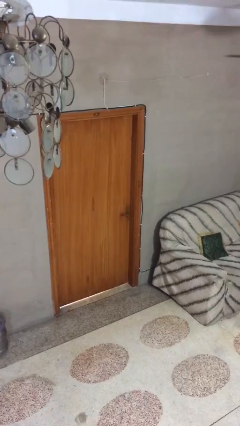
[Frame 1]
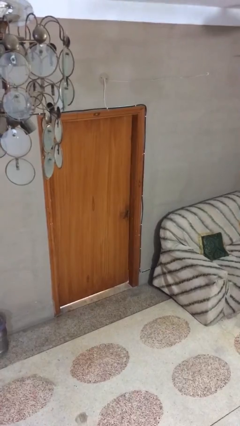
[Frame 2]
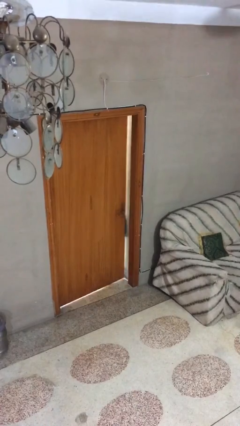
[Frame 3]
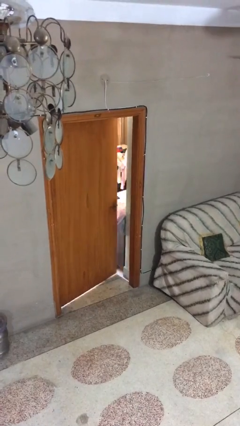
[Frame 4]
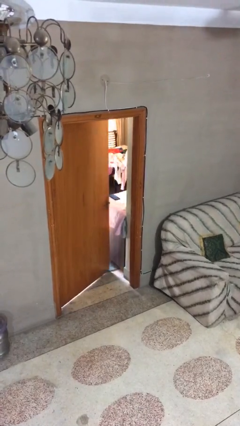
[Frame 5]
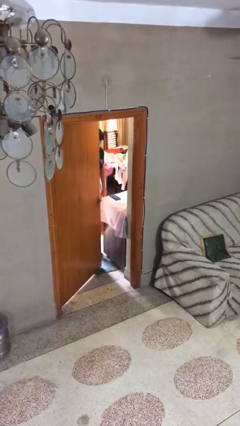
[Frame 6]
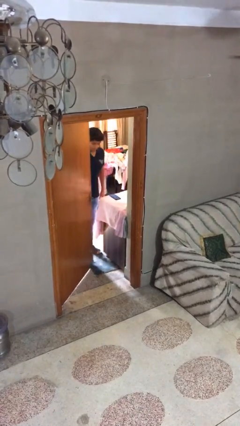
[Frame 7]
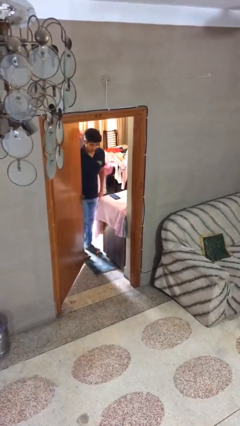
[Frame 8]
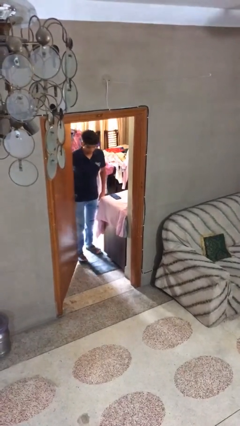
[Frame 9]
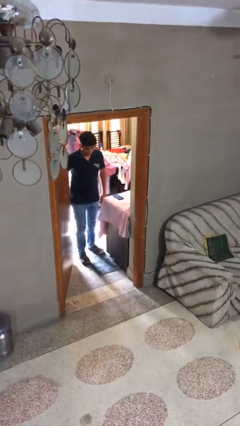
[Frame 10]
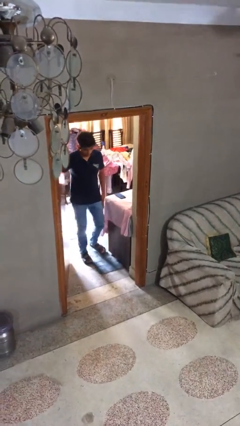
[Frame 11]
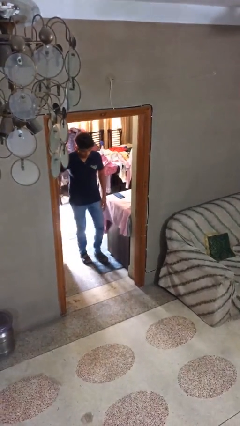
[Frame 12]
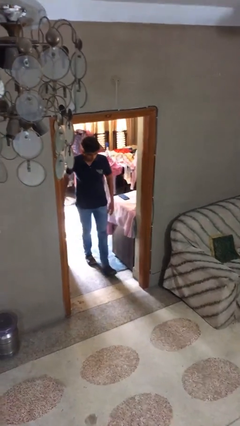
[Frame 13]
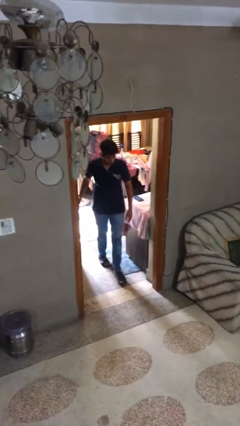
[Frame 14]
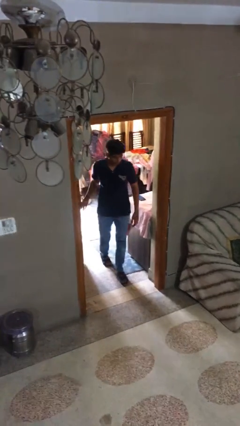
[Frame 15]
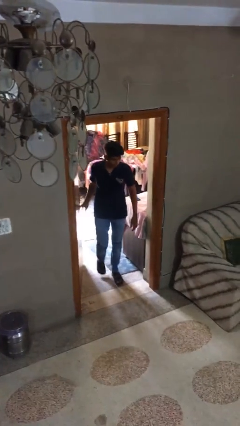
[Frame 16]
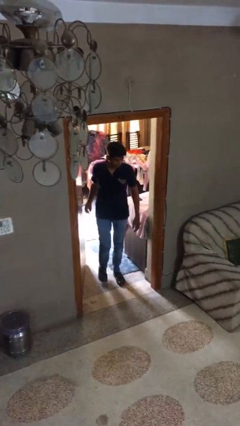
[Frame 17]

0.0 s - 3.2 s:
person opens facility door

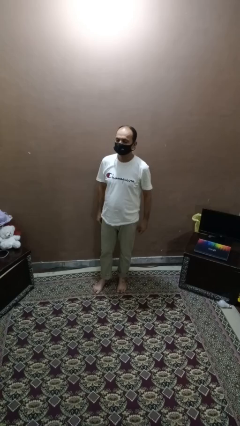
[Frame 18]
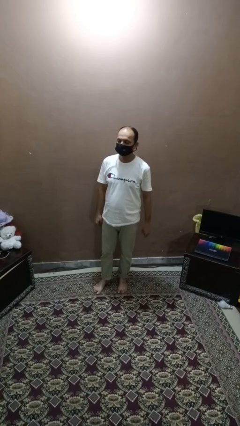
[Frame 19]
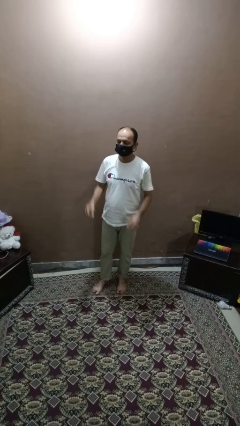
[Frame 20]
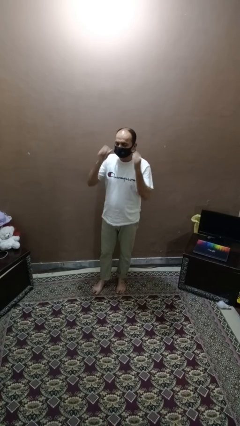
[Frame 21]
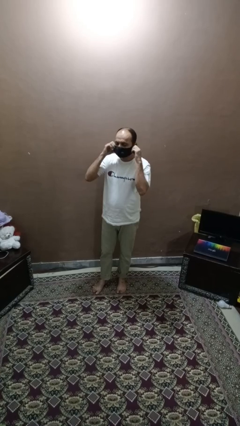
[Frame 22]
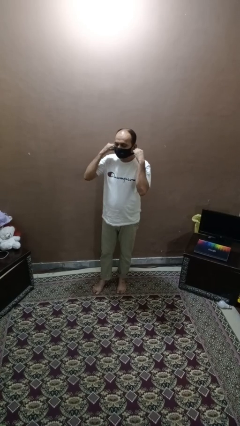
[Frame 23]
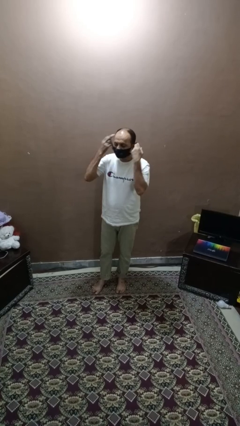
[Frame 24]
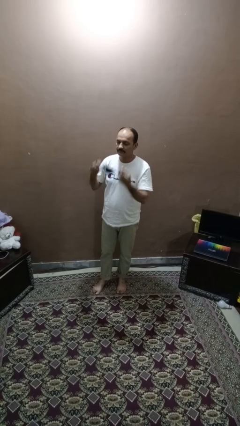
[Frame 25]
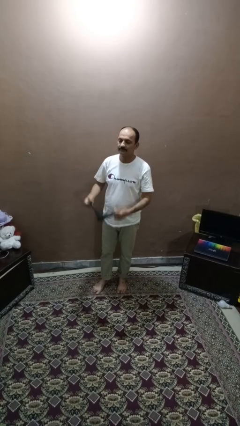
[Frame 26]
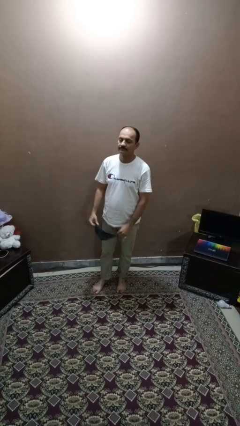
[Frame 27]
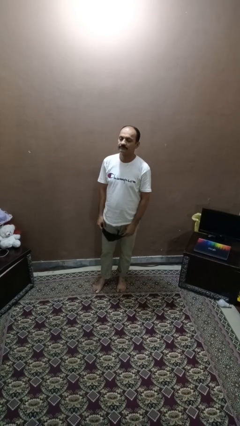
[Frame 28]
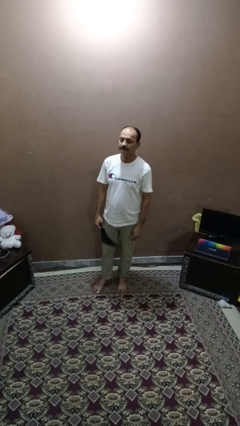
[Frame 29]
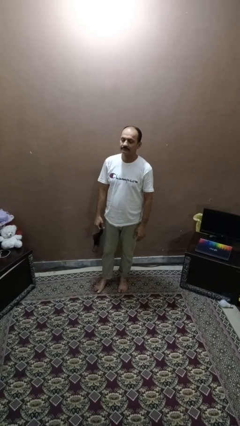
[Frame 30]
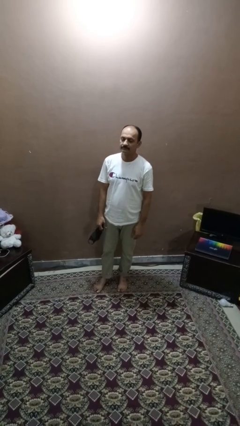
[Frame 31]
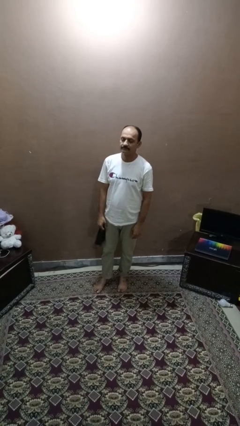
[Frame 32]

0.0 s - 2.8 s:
person takes off facemask

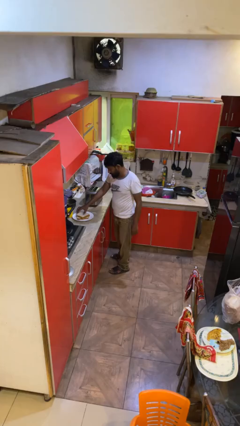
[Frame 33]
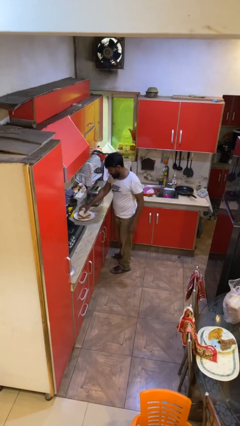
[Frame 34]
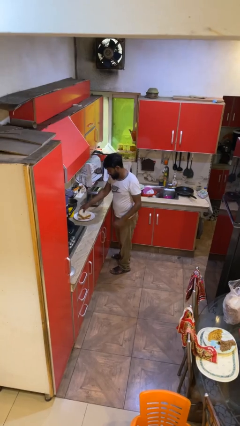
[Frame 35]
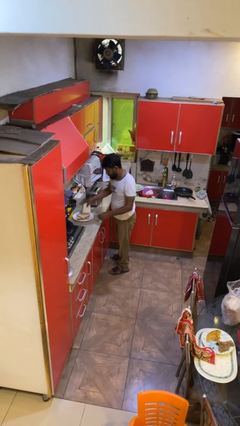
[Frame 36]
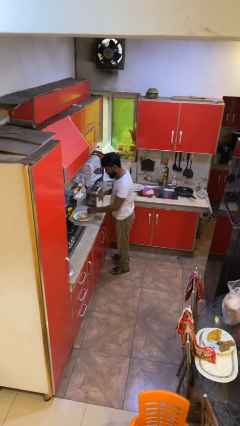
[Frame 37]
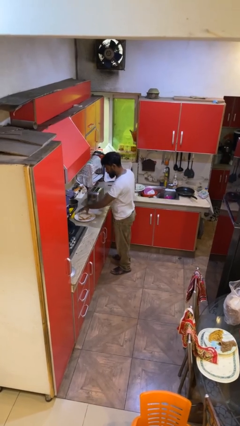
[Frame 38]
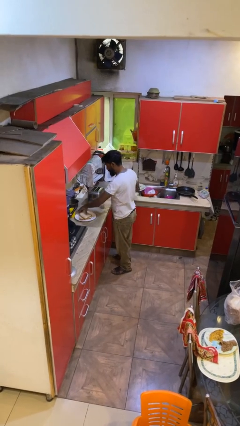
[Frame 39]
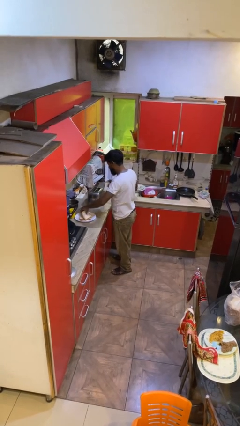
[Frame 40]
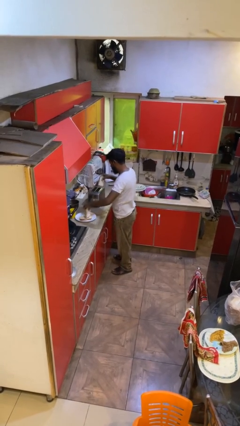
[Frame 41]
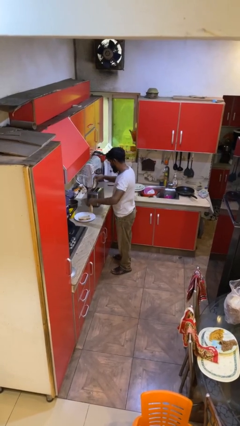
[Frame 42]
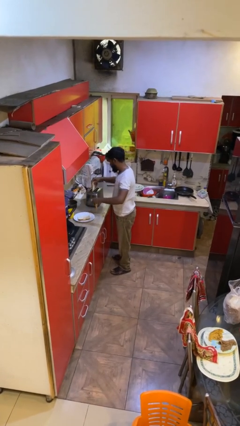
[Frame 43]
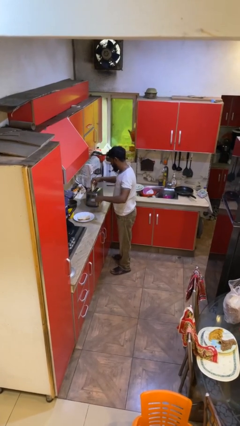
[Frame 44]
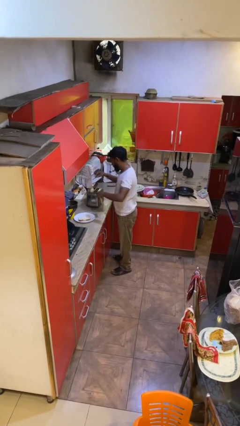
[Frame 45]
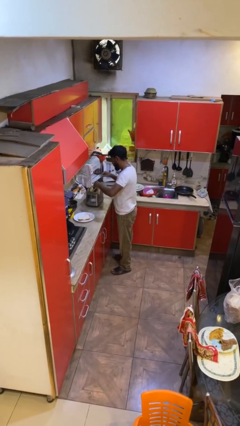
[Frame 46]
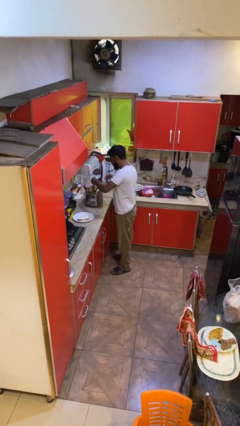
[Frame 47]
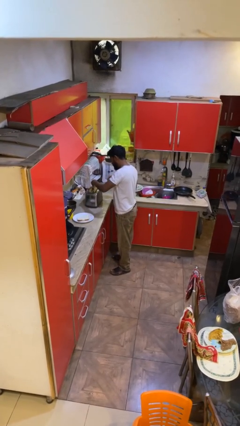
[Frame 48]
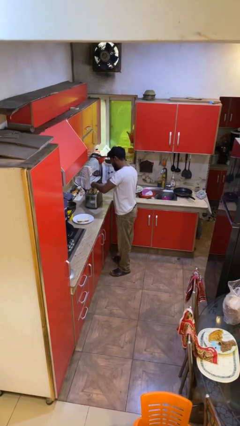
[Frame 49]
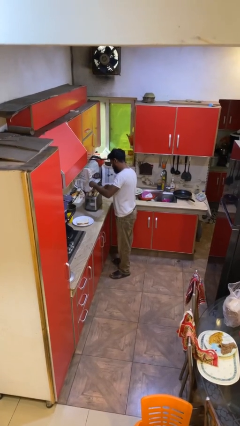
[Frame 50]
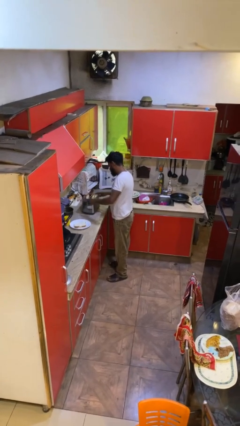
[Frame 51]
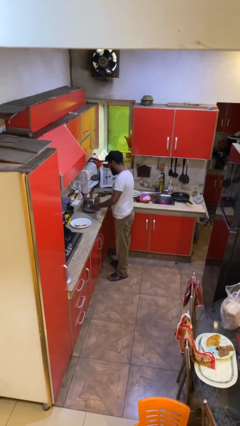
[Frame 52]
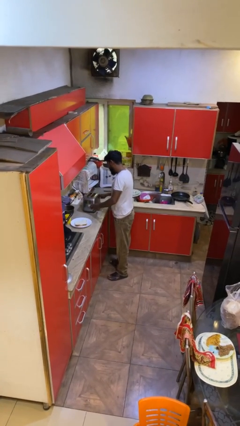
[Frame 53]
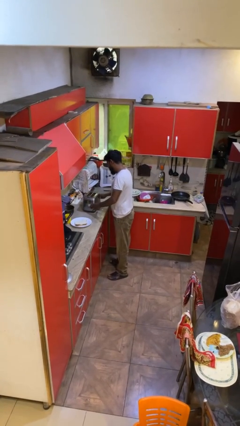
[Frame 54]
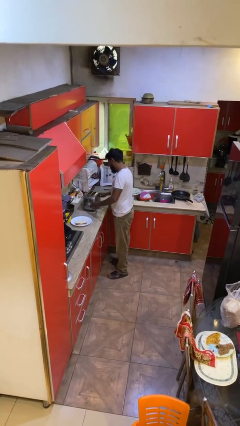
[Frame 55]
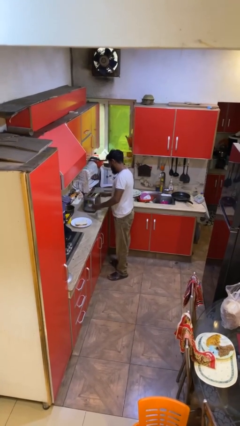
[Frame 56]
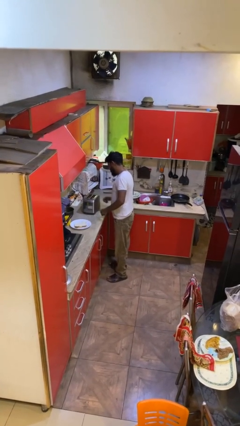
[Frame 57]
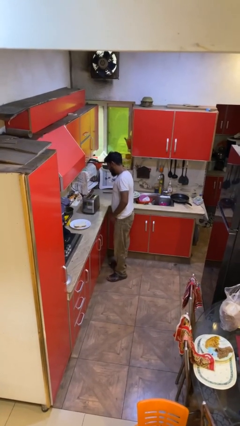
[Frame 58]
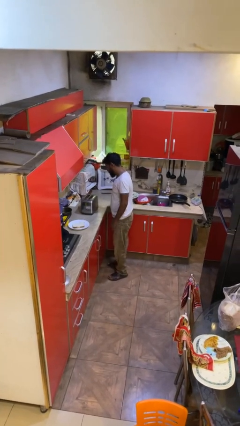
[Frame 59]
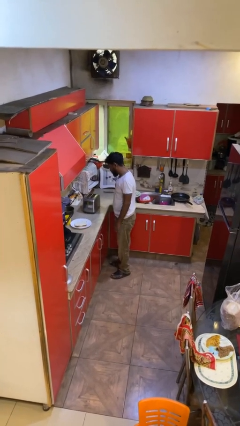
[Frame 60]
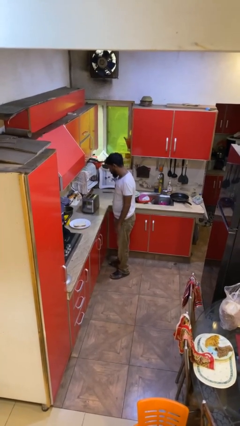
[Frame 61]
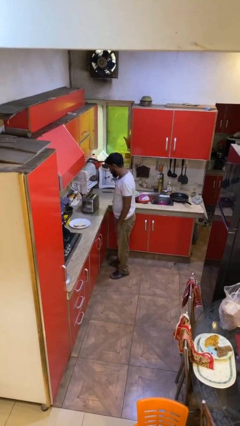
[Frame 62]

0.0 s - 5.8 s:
person puts object into toaster

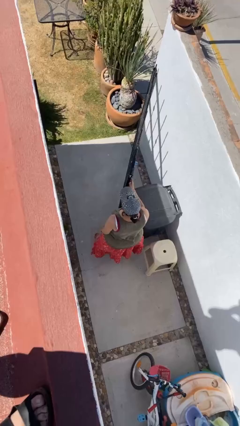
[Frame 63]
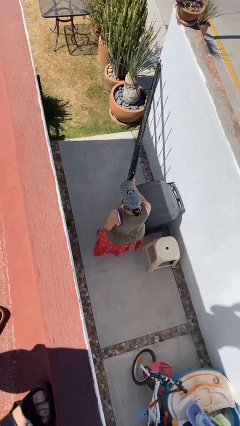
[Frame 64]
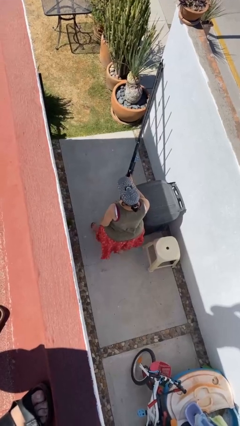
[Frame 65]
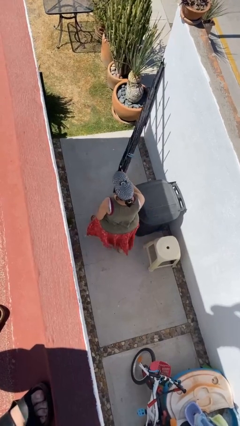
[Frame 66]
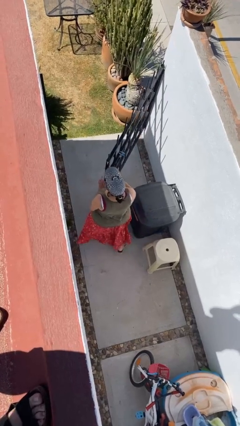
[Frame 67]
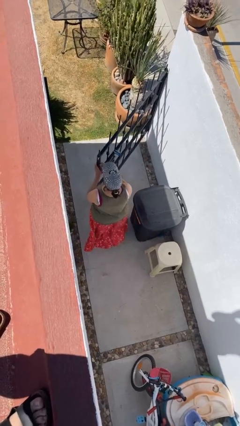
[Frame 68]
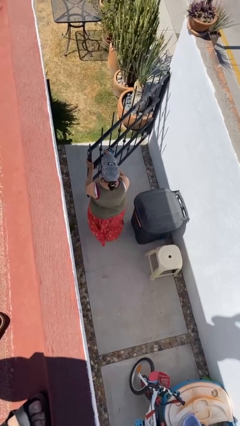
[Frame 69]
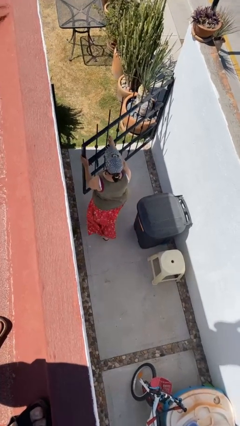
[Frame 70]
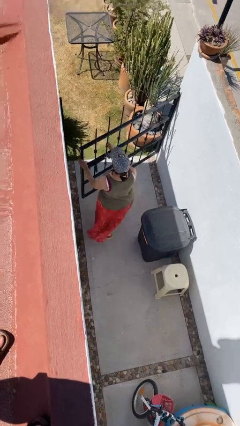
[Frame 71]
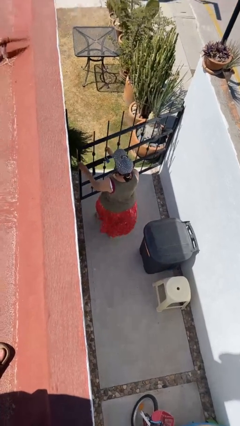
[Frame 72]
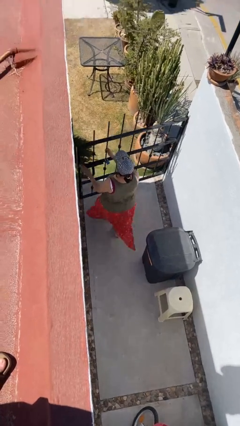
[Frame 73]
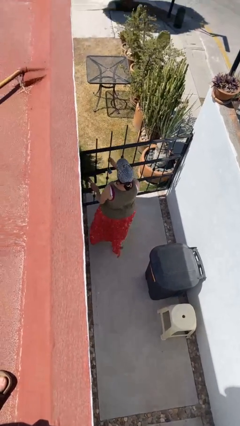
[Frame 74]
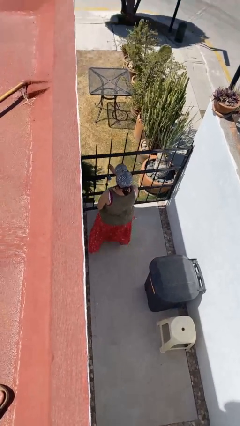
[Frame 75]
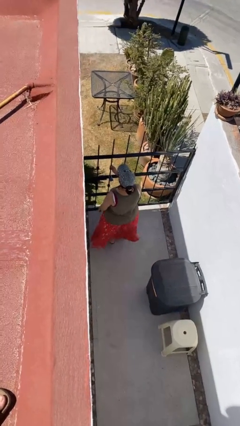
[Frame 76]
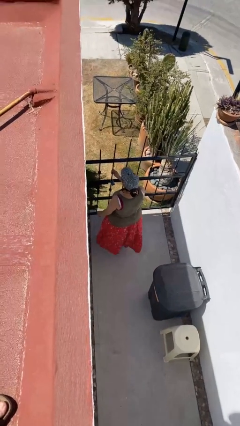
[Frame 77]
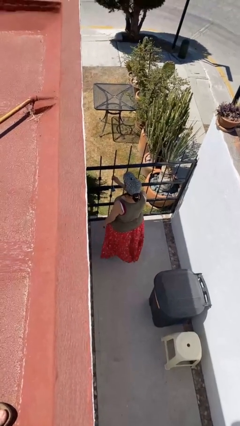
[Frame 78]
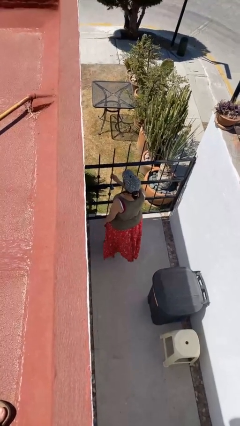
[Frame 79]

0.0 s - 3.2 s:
person closes facility door

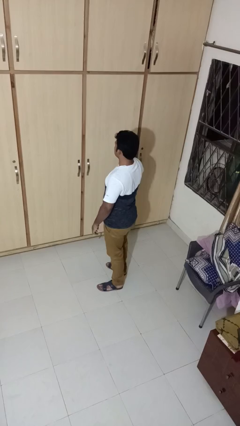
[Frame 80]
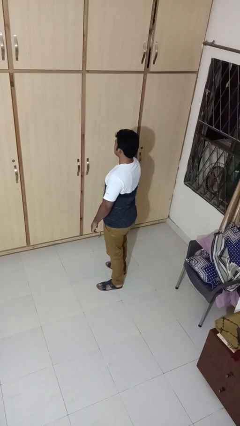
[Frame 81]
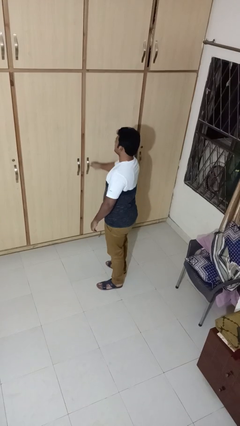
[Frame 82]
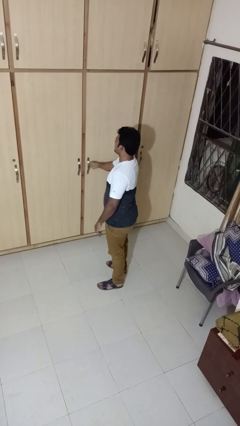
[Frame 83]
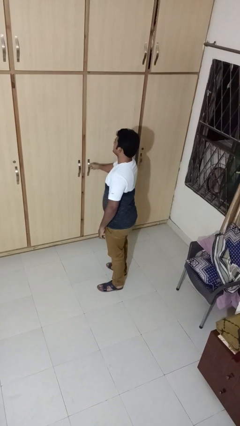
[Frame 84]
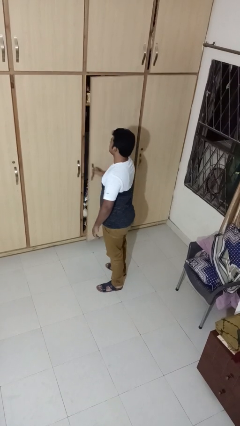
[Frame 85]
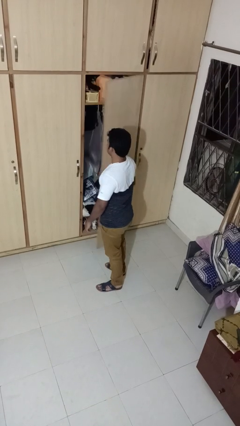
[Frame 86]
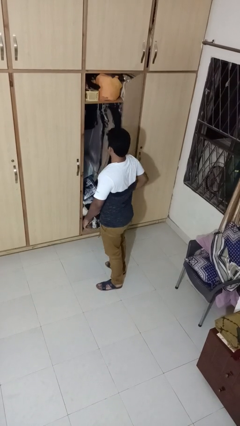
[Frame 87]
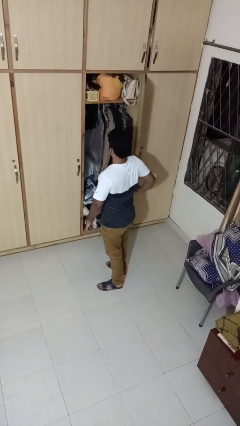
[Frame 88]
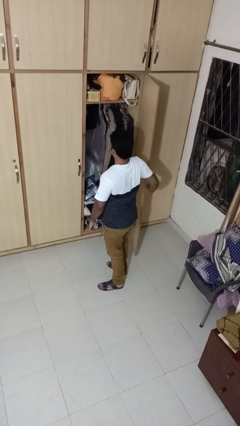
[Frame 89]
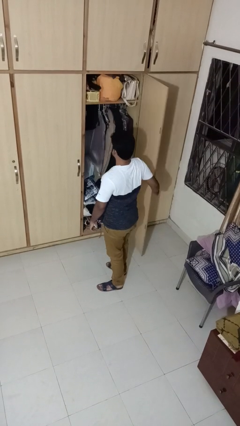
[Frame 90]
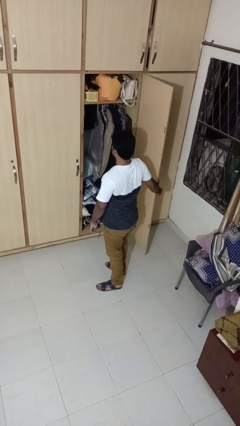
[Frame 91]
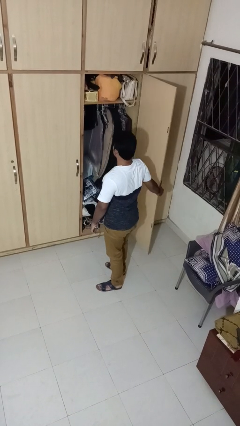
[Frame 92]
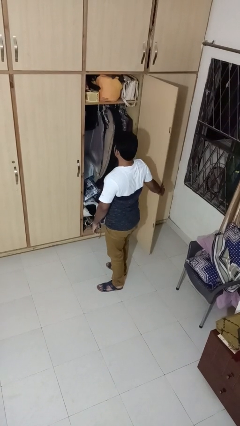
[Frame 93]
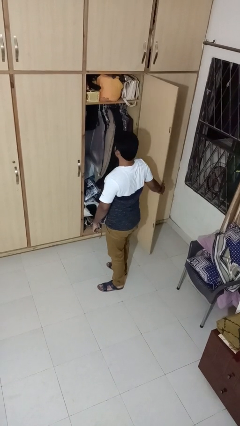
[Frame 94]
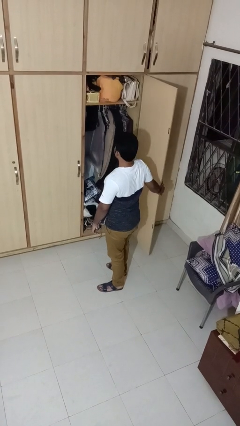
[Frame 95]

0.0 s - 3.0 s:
person opens closet door
